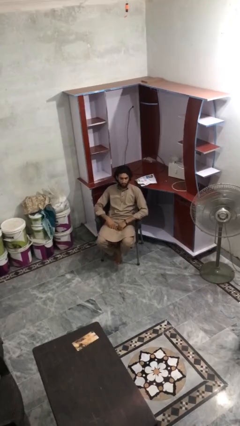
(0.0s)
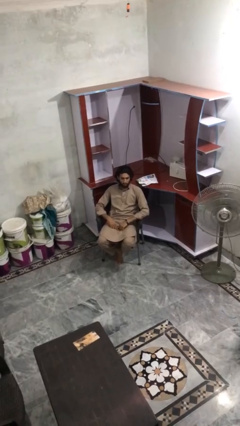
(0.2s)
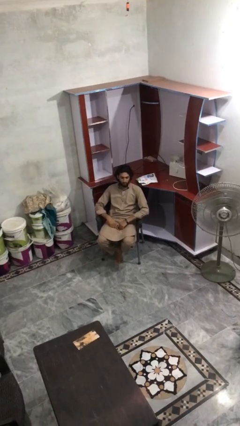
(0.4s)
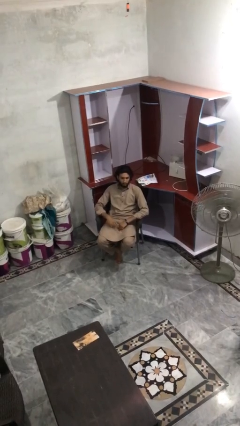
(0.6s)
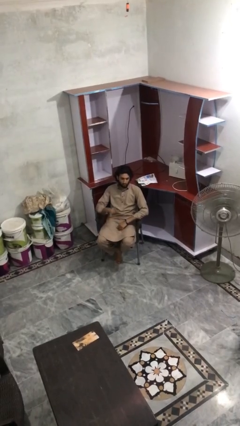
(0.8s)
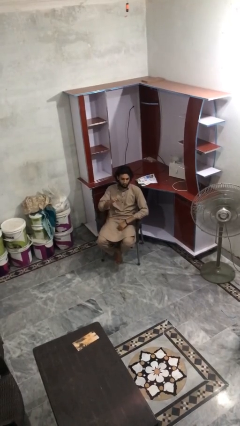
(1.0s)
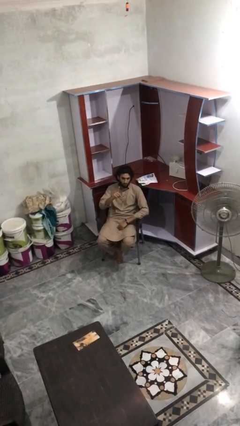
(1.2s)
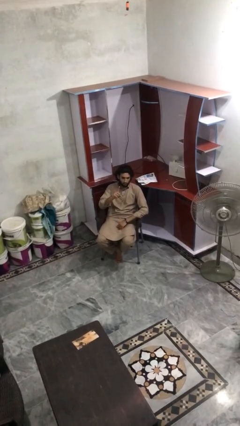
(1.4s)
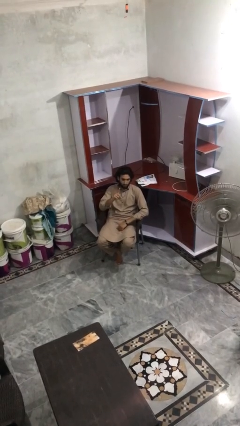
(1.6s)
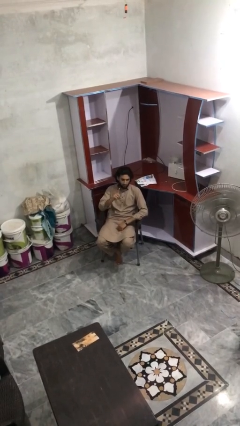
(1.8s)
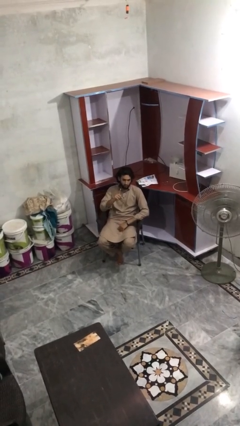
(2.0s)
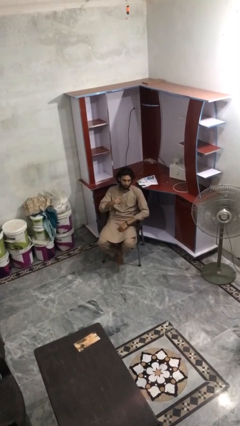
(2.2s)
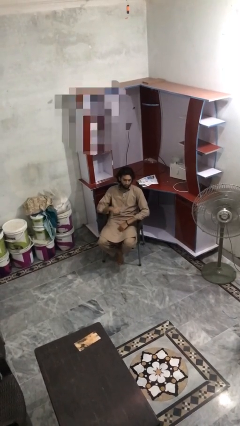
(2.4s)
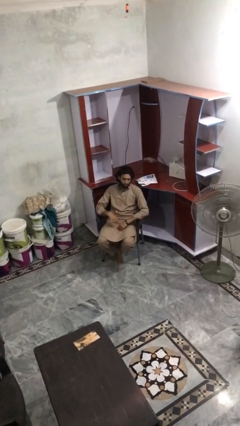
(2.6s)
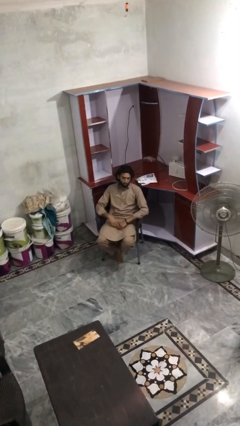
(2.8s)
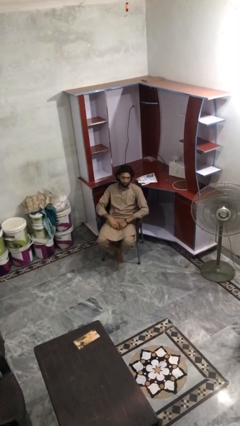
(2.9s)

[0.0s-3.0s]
person gestures number one

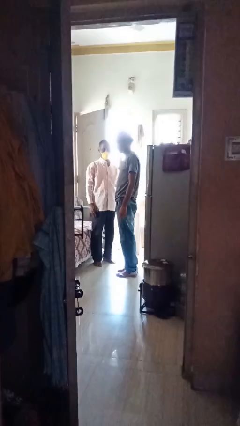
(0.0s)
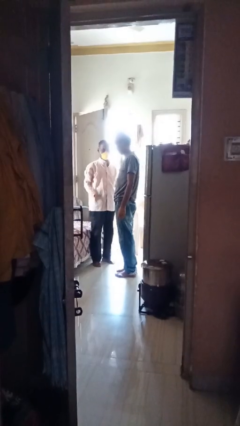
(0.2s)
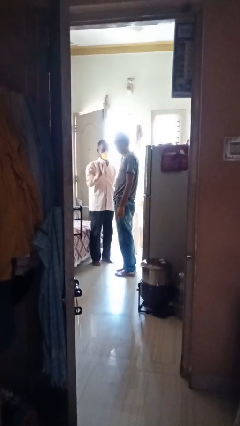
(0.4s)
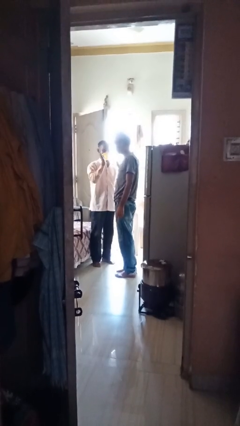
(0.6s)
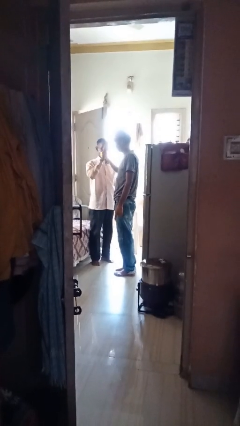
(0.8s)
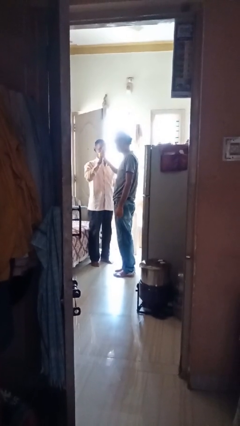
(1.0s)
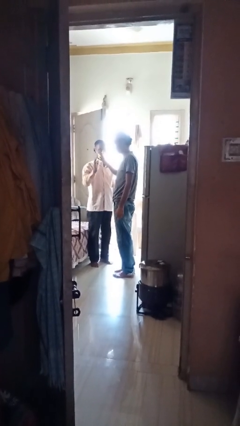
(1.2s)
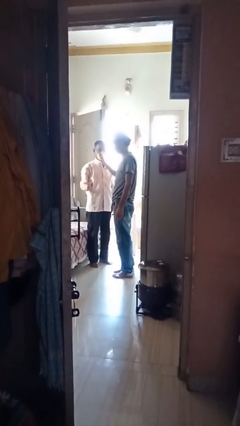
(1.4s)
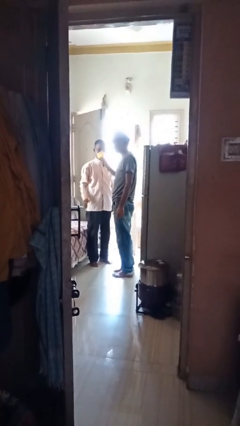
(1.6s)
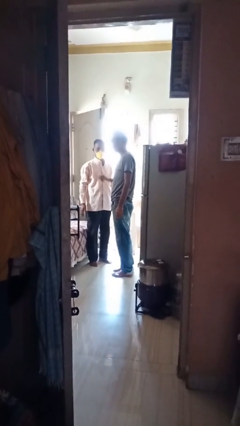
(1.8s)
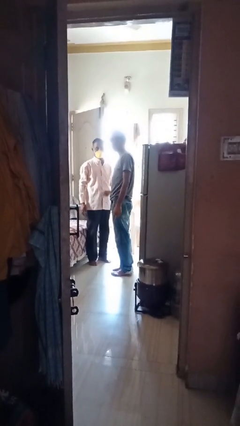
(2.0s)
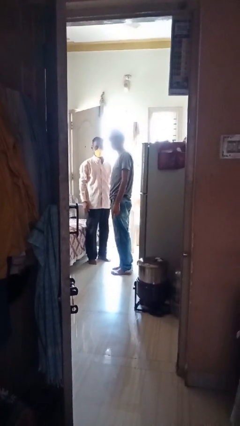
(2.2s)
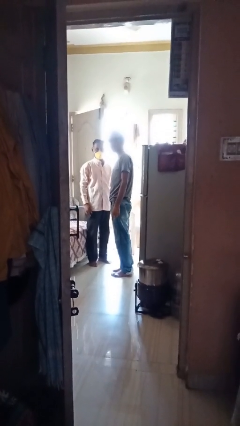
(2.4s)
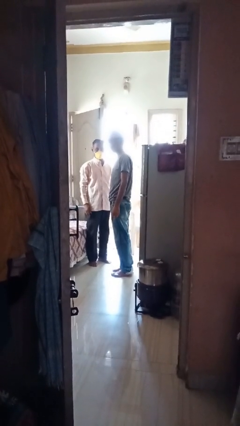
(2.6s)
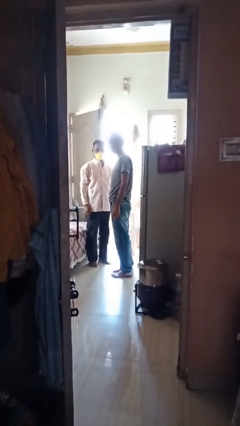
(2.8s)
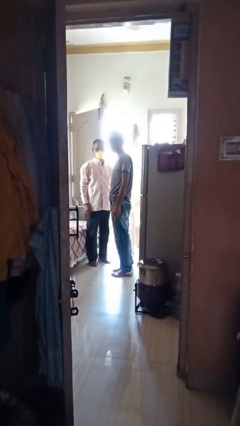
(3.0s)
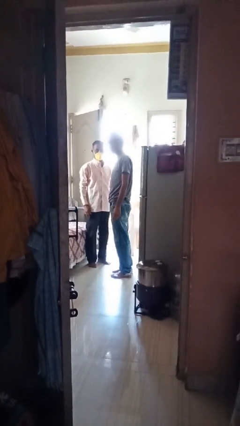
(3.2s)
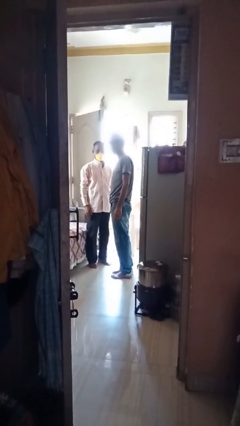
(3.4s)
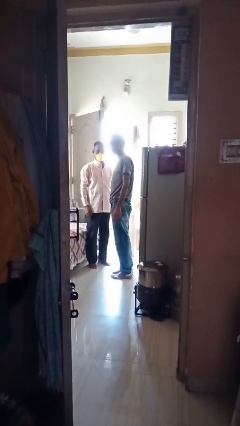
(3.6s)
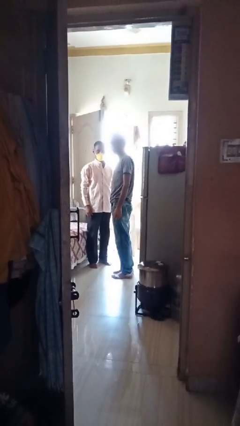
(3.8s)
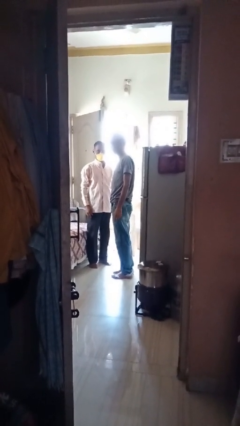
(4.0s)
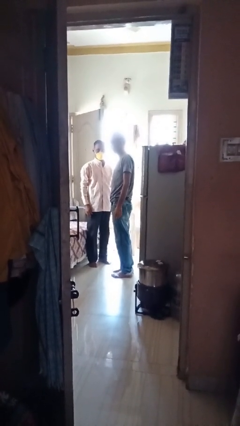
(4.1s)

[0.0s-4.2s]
person highfives hand

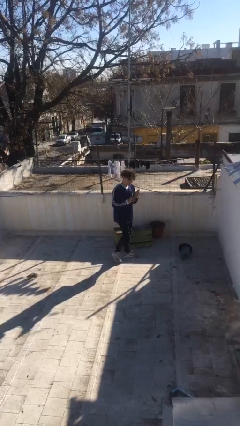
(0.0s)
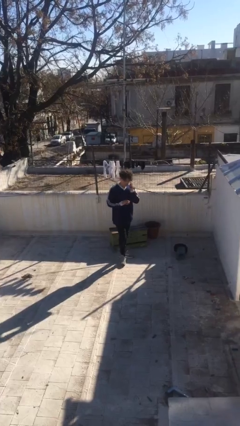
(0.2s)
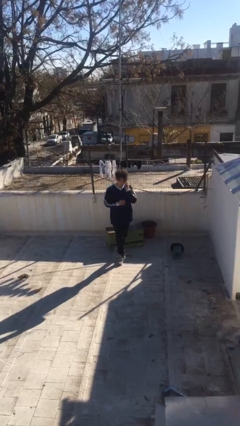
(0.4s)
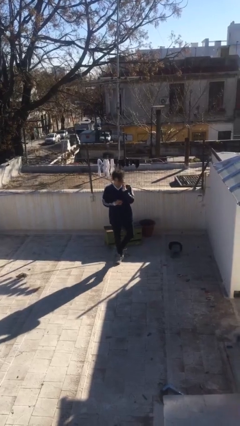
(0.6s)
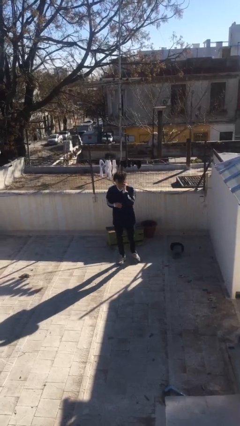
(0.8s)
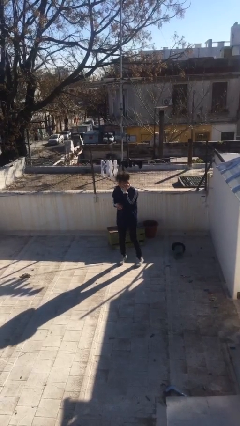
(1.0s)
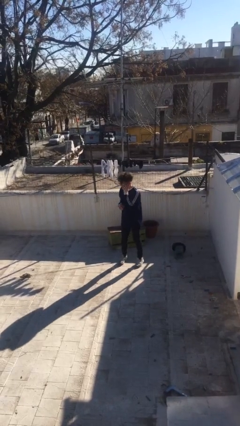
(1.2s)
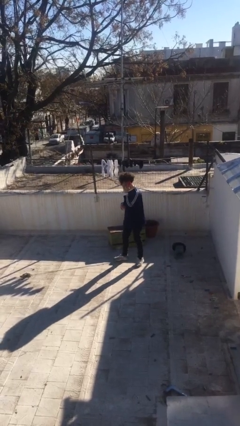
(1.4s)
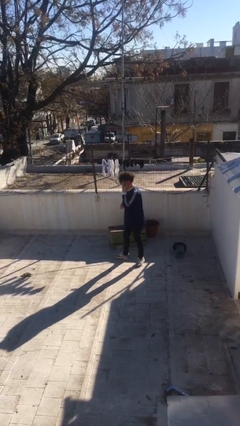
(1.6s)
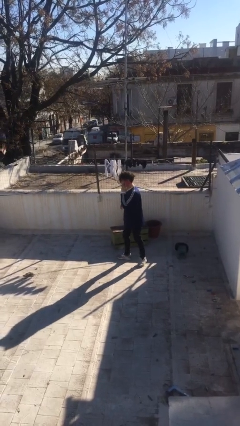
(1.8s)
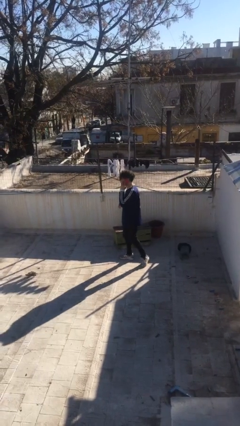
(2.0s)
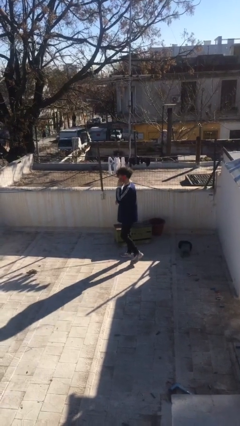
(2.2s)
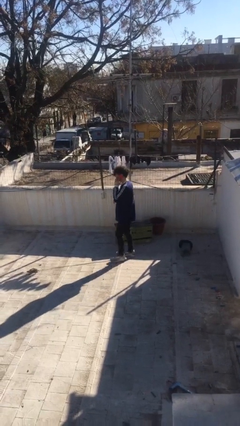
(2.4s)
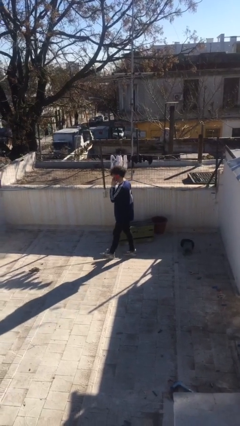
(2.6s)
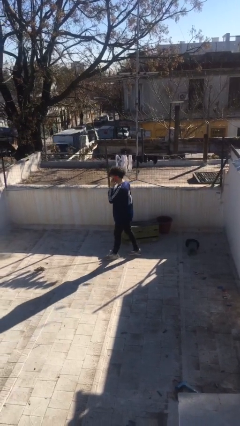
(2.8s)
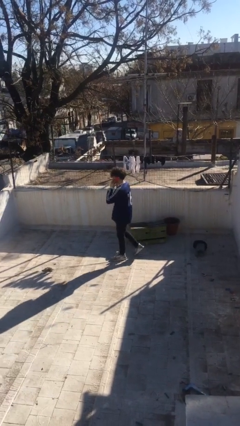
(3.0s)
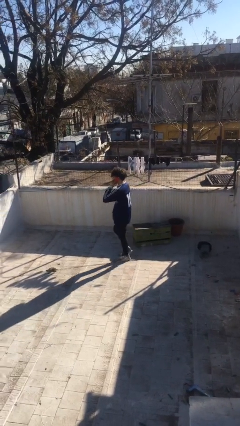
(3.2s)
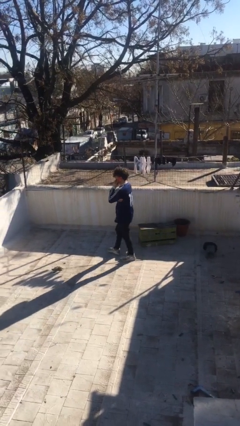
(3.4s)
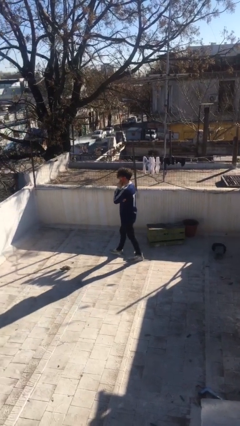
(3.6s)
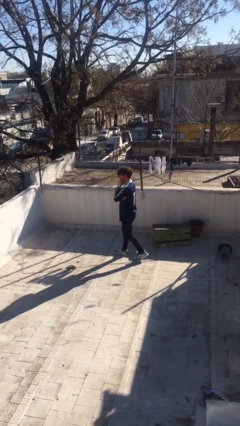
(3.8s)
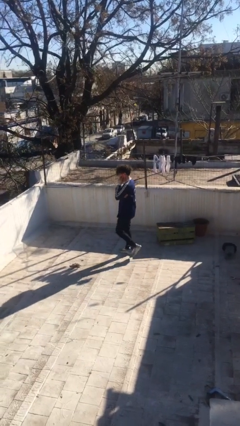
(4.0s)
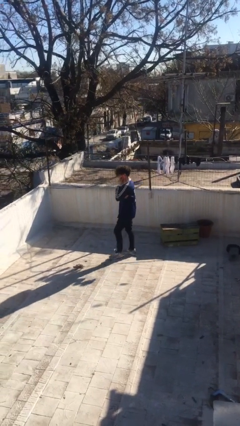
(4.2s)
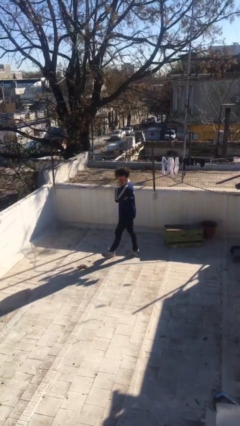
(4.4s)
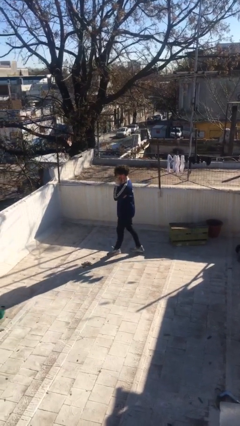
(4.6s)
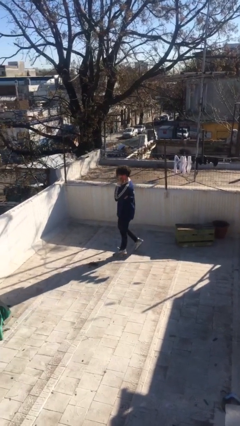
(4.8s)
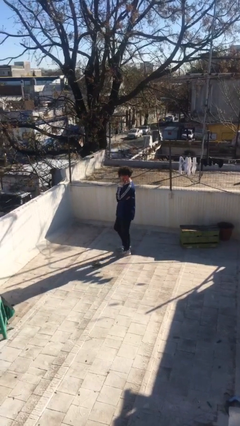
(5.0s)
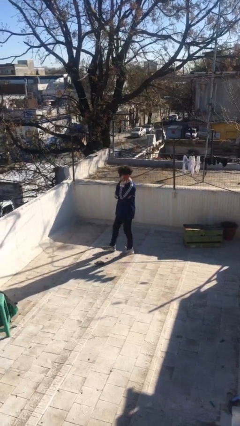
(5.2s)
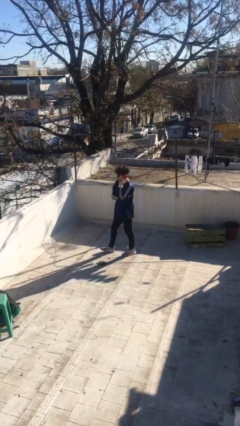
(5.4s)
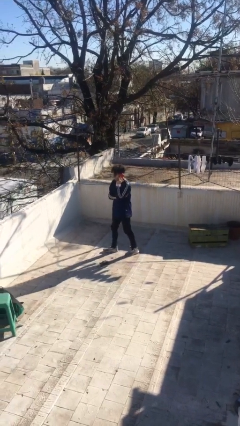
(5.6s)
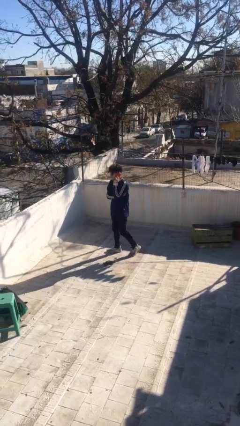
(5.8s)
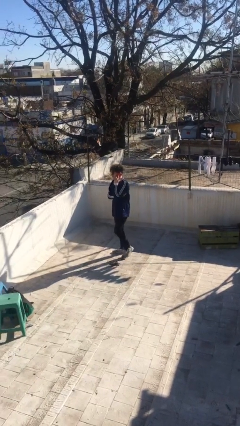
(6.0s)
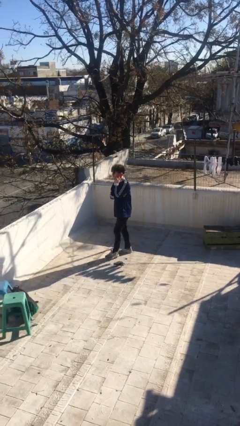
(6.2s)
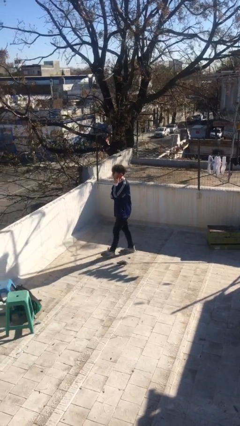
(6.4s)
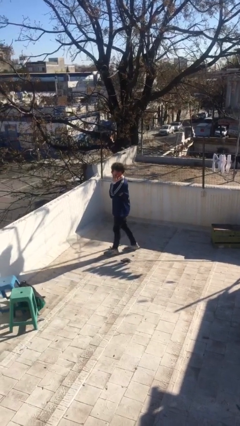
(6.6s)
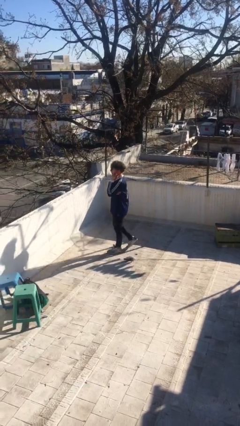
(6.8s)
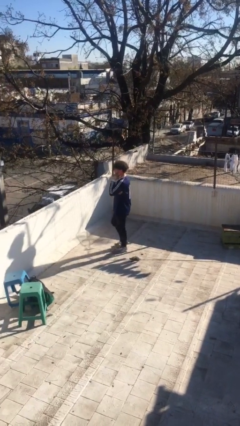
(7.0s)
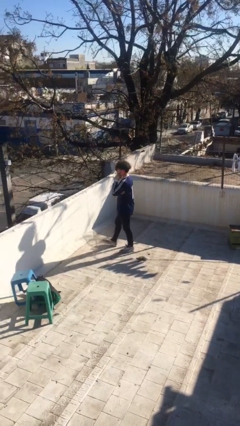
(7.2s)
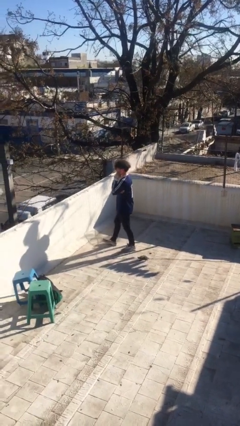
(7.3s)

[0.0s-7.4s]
person talks on phone

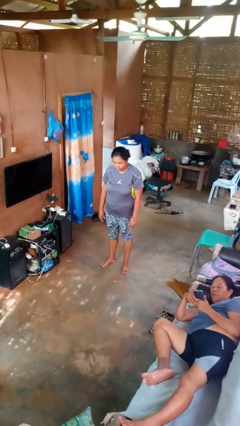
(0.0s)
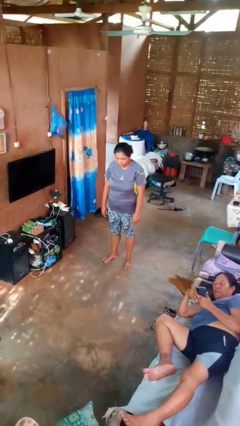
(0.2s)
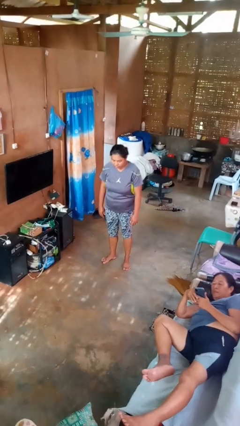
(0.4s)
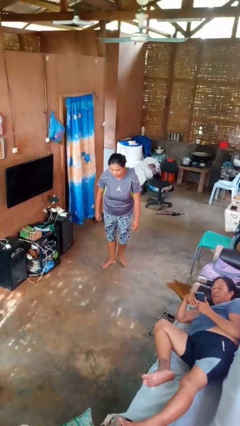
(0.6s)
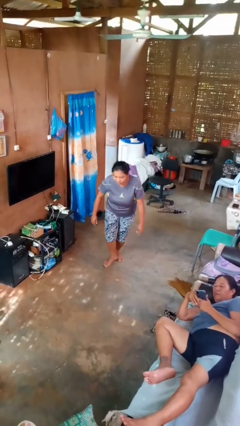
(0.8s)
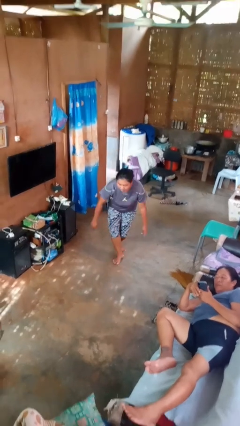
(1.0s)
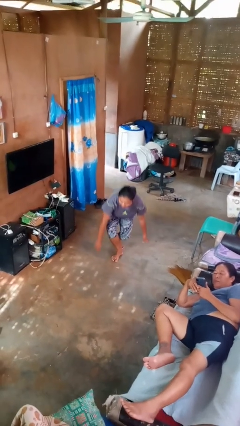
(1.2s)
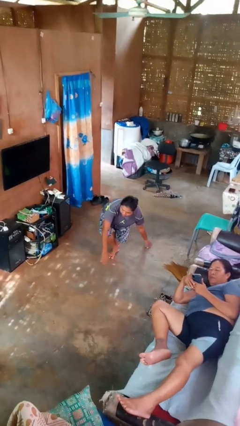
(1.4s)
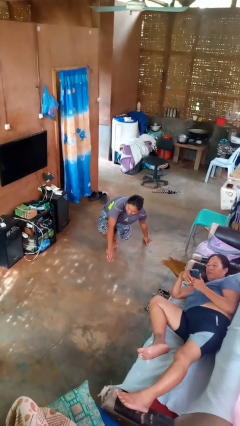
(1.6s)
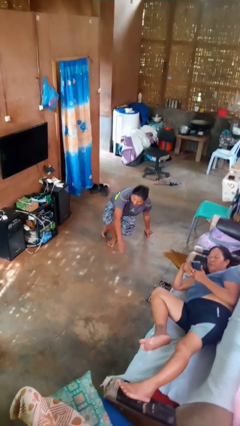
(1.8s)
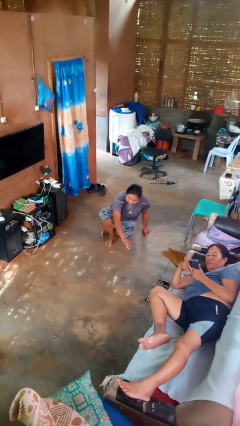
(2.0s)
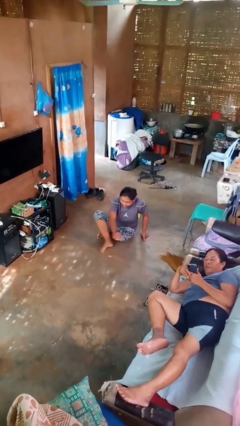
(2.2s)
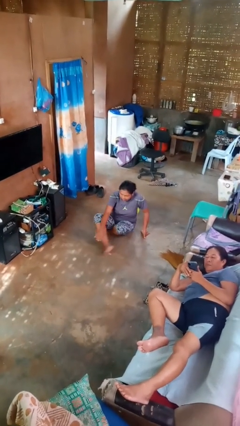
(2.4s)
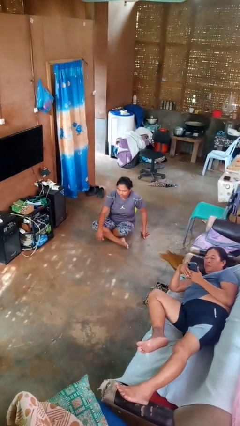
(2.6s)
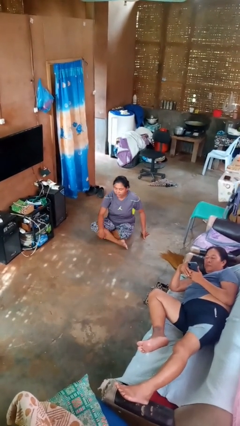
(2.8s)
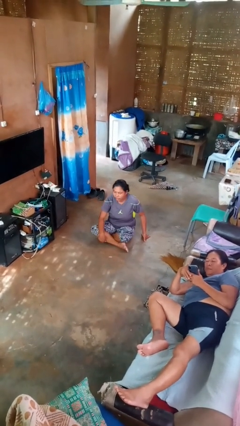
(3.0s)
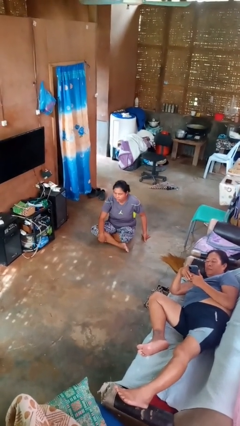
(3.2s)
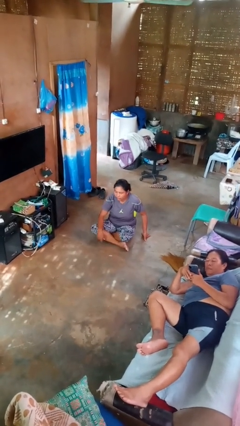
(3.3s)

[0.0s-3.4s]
person sits crisscross
